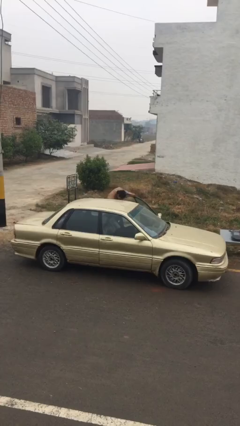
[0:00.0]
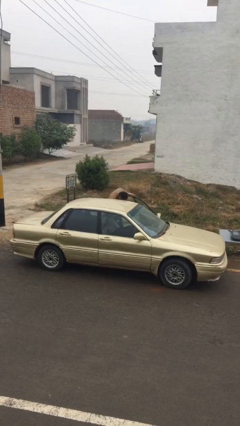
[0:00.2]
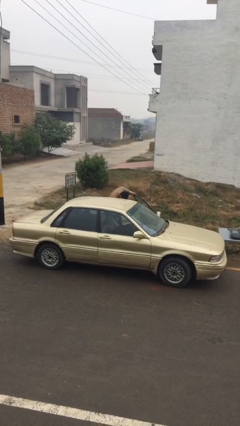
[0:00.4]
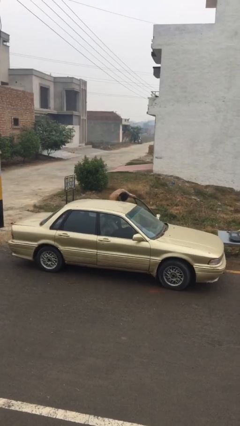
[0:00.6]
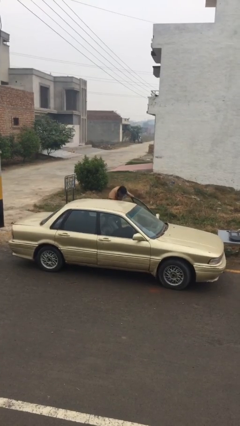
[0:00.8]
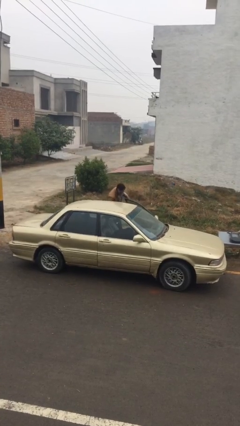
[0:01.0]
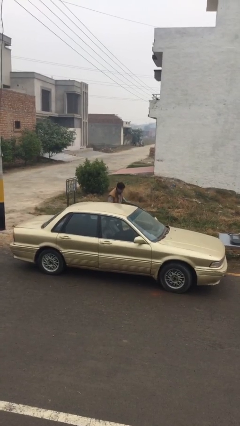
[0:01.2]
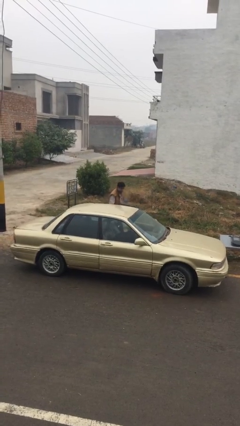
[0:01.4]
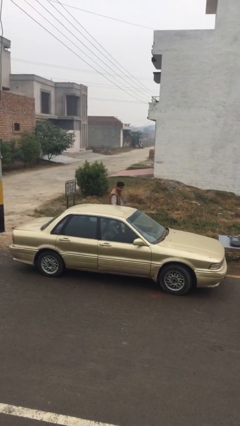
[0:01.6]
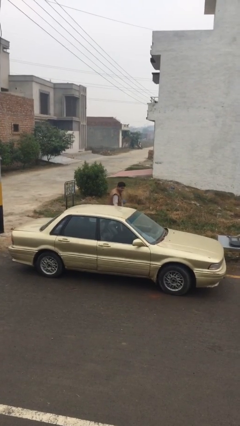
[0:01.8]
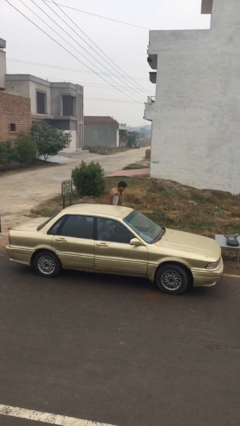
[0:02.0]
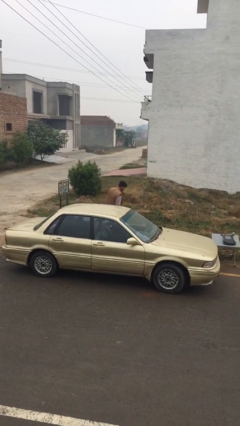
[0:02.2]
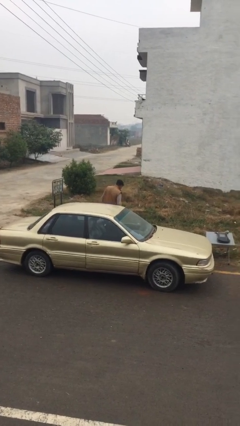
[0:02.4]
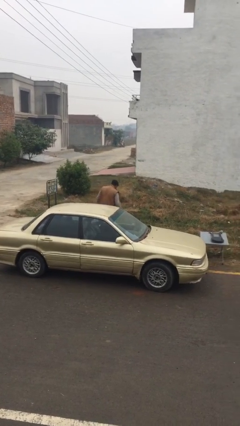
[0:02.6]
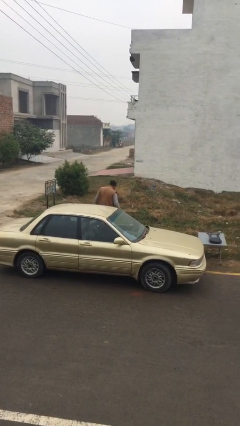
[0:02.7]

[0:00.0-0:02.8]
person closes car door

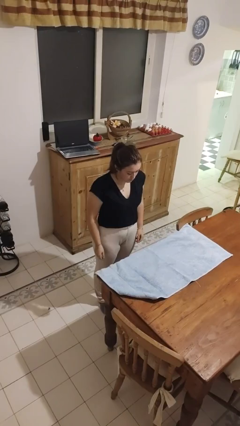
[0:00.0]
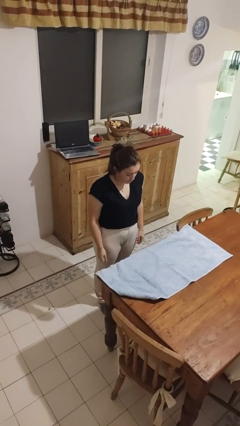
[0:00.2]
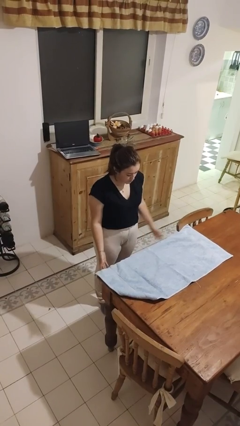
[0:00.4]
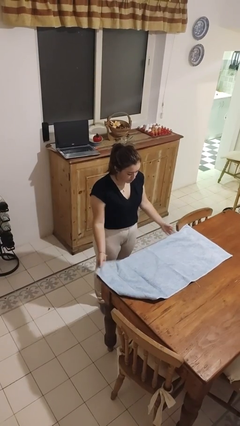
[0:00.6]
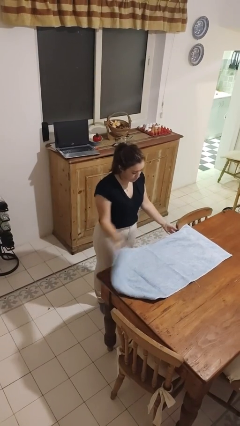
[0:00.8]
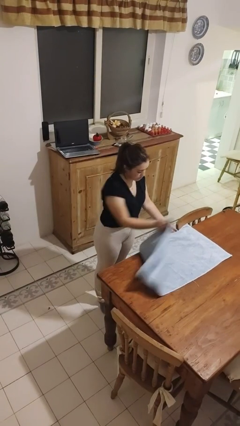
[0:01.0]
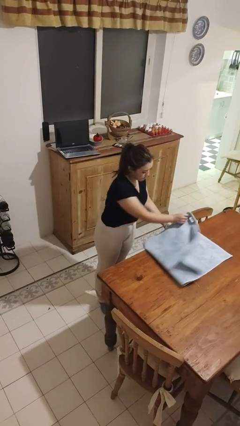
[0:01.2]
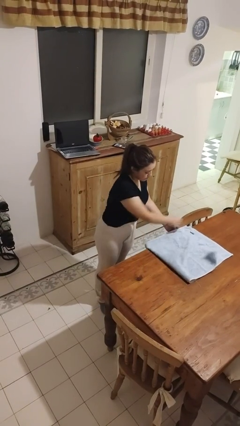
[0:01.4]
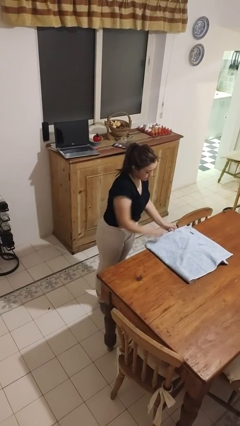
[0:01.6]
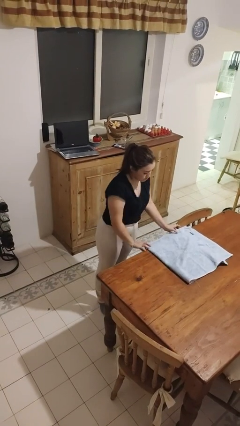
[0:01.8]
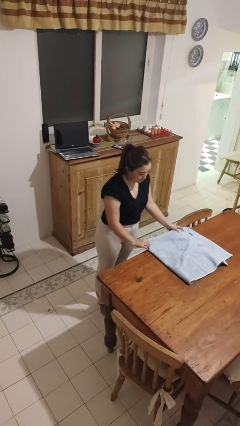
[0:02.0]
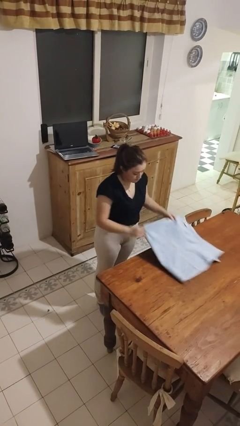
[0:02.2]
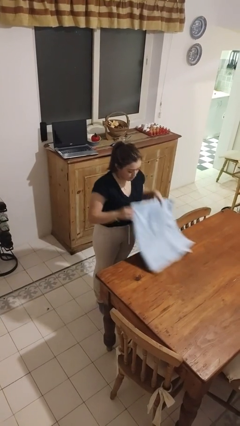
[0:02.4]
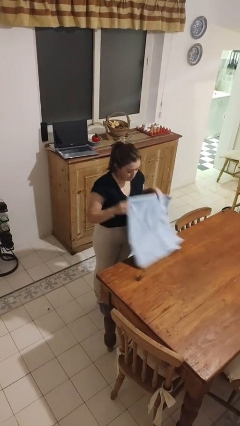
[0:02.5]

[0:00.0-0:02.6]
person folds tablecloth

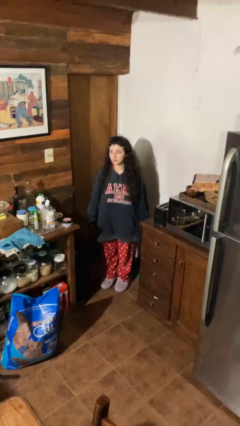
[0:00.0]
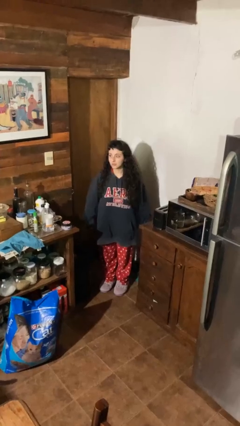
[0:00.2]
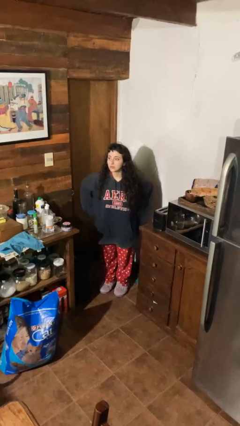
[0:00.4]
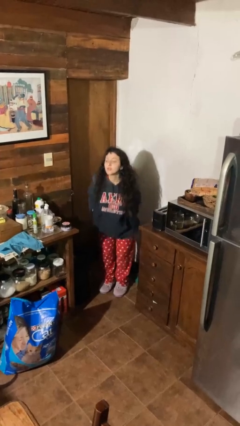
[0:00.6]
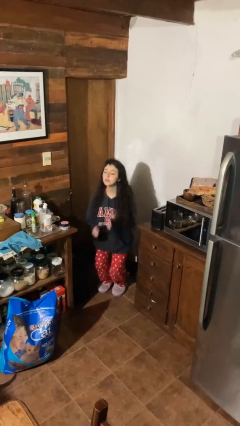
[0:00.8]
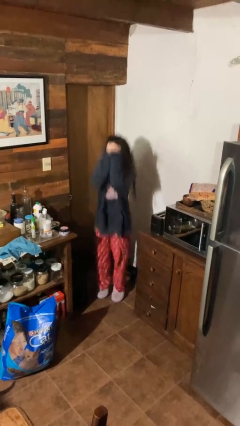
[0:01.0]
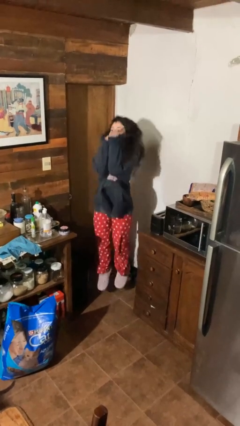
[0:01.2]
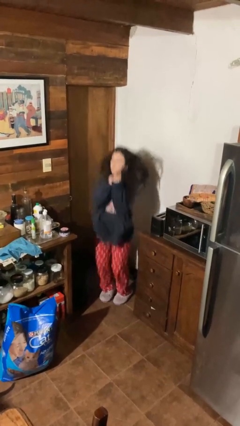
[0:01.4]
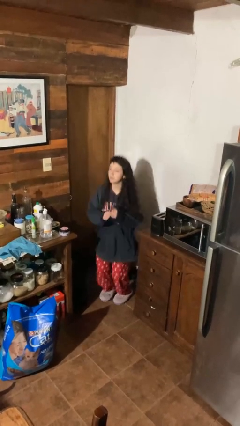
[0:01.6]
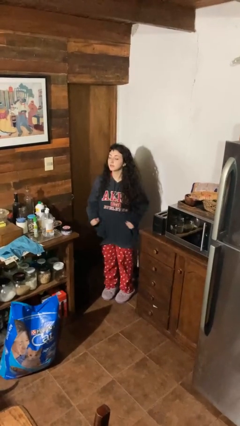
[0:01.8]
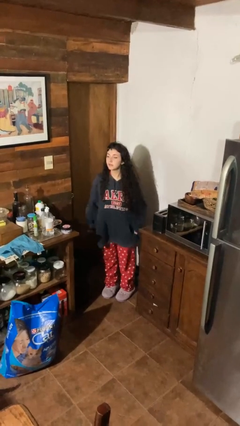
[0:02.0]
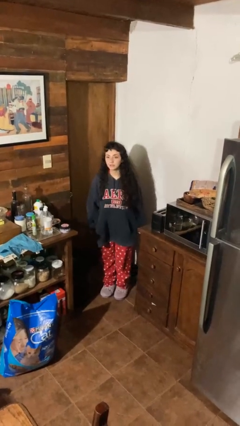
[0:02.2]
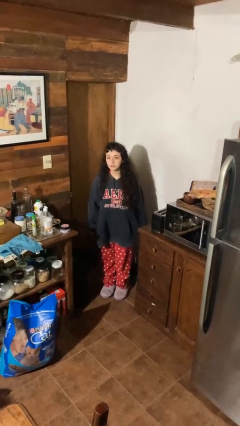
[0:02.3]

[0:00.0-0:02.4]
person jumps

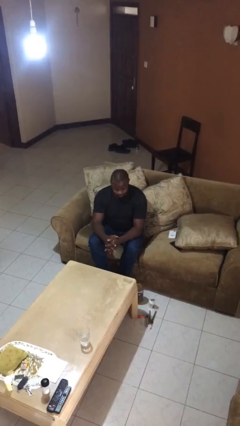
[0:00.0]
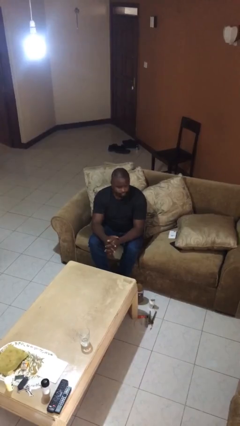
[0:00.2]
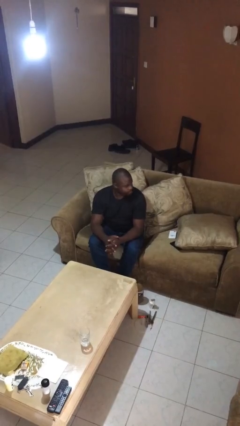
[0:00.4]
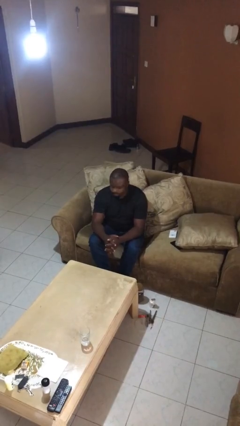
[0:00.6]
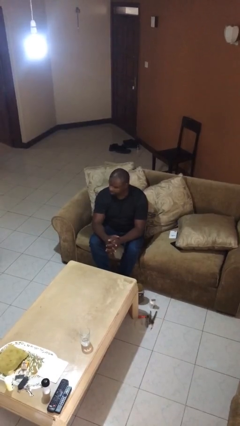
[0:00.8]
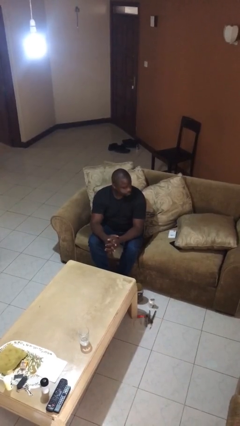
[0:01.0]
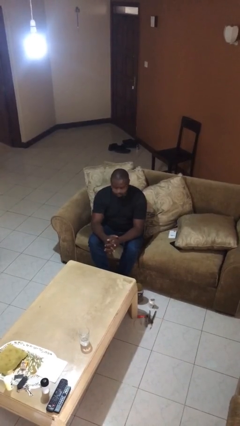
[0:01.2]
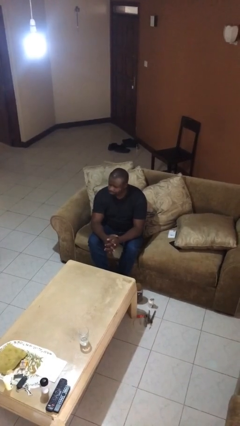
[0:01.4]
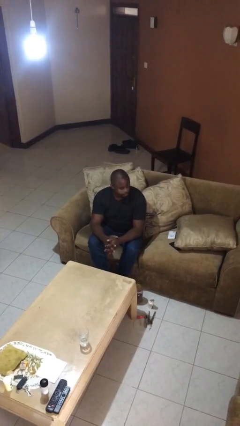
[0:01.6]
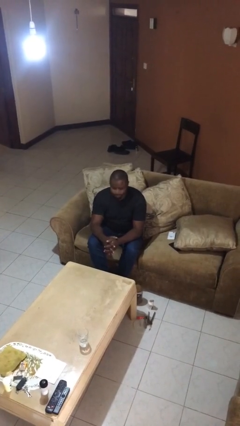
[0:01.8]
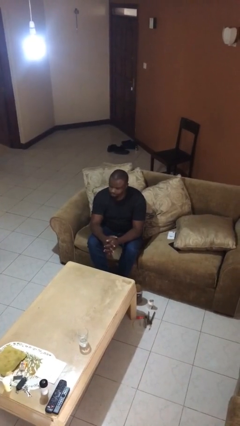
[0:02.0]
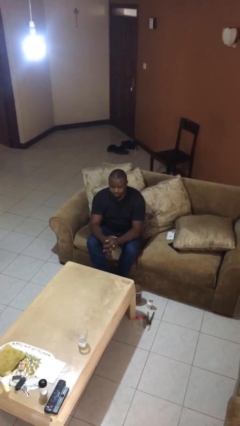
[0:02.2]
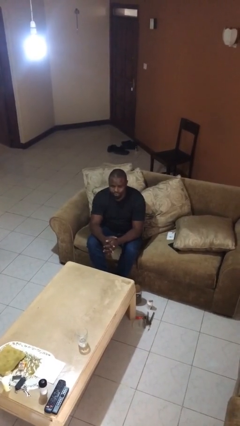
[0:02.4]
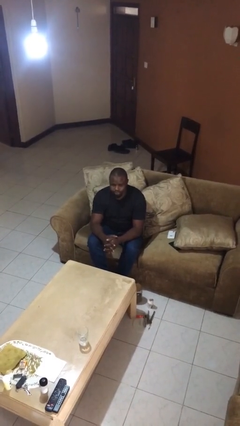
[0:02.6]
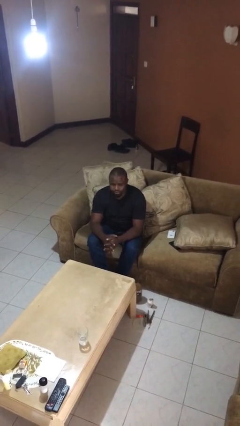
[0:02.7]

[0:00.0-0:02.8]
person shakes head

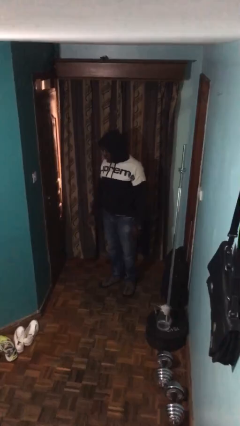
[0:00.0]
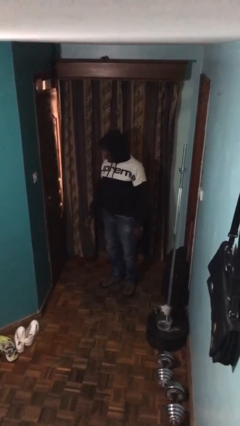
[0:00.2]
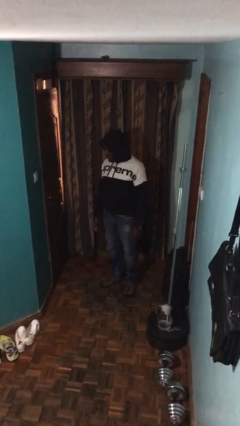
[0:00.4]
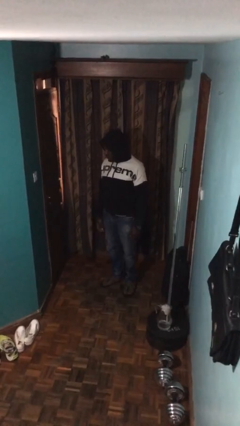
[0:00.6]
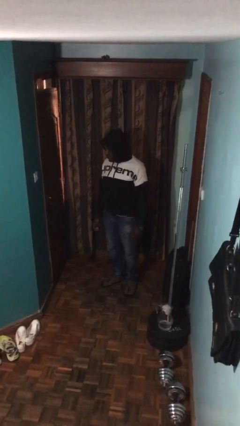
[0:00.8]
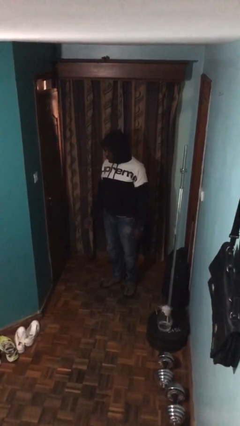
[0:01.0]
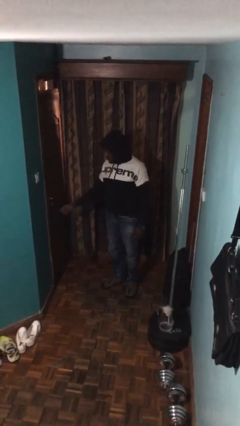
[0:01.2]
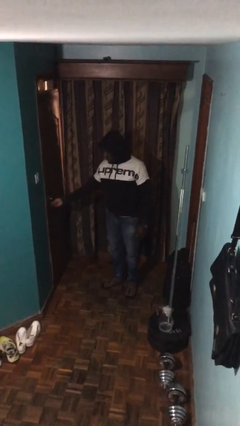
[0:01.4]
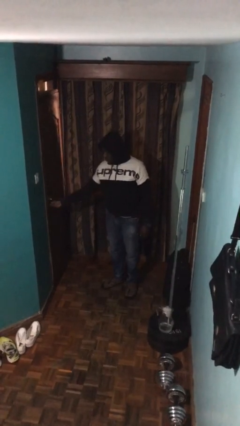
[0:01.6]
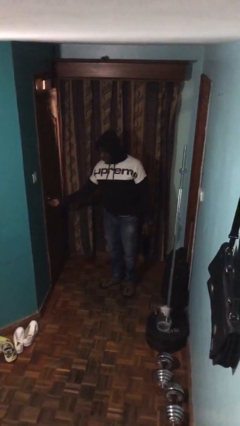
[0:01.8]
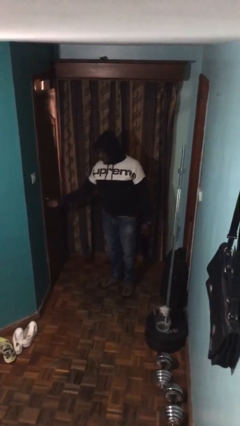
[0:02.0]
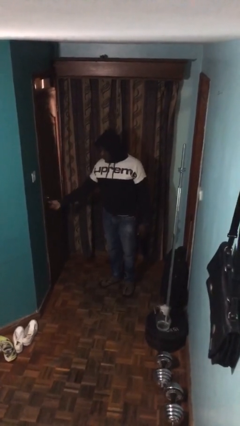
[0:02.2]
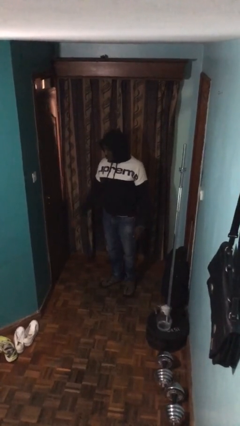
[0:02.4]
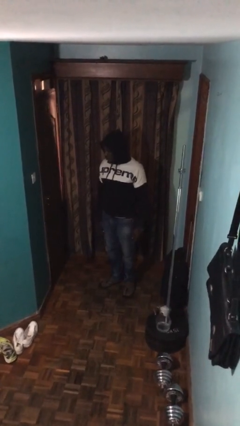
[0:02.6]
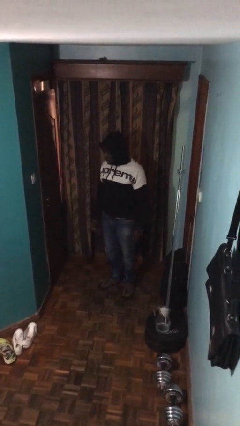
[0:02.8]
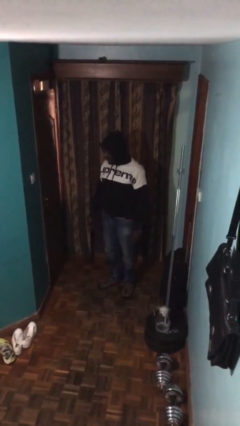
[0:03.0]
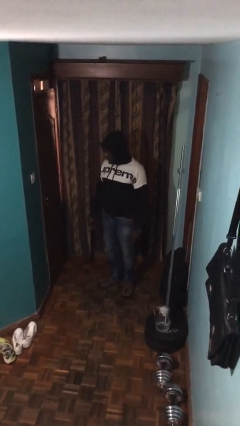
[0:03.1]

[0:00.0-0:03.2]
person locks door with keys

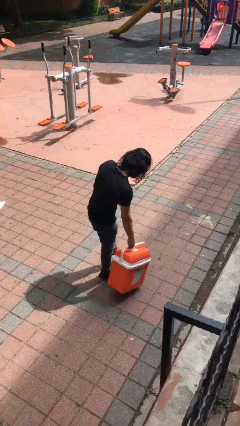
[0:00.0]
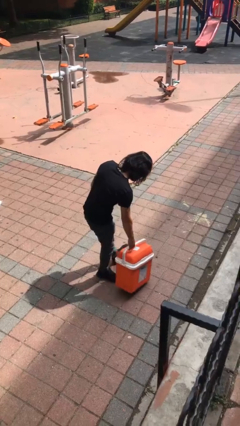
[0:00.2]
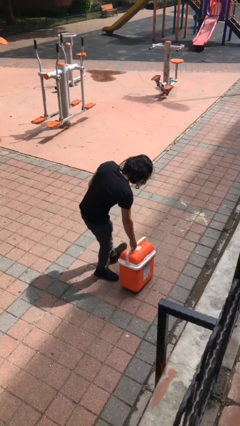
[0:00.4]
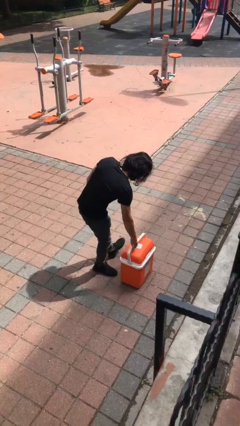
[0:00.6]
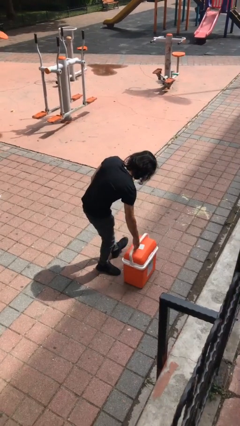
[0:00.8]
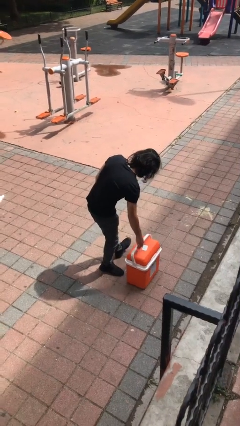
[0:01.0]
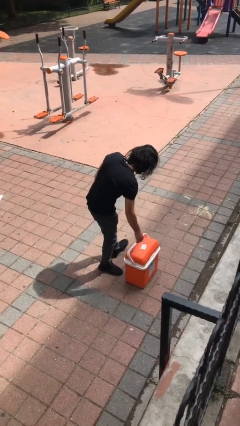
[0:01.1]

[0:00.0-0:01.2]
person puts down object on floor

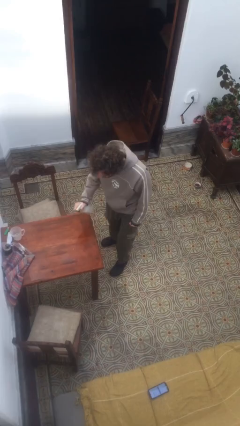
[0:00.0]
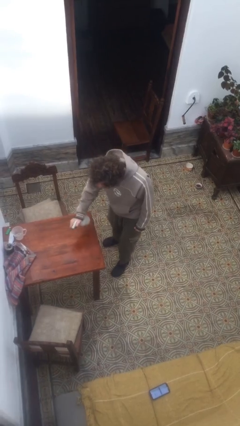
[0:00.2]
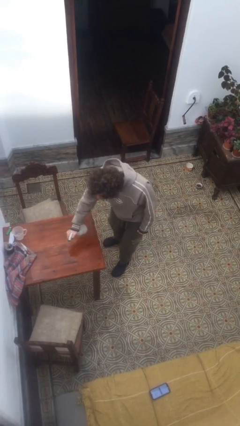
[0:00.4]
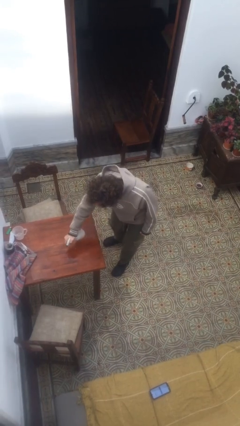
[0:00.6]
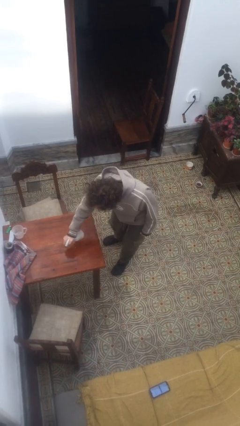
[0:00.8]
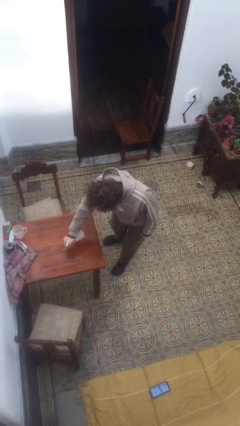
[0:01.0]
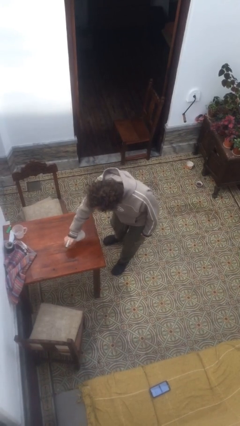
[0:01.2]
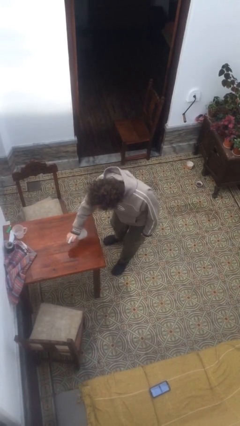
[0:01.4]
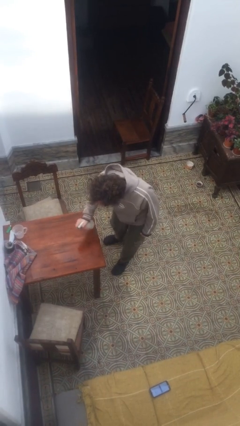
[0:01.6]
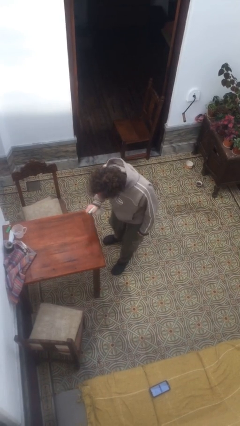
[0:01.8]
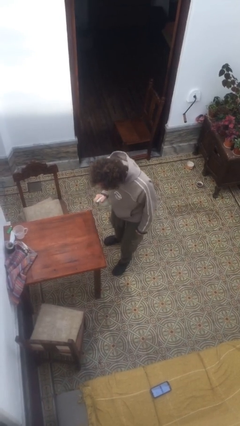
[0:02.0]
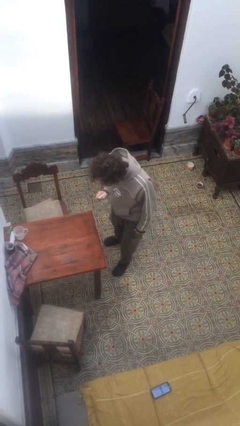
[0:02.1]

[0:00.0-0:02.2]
person sprays from bottle
